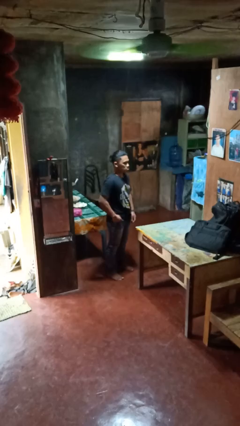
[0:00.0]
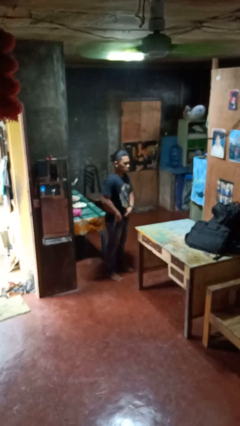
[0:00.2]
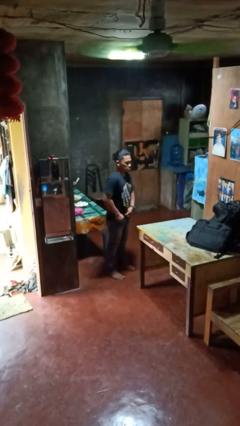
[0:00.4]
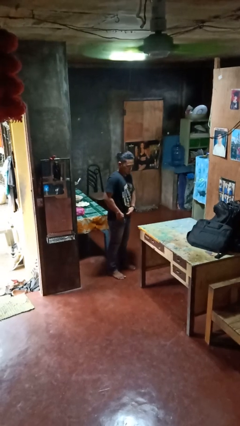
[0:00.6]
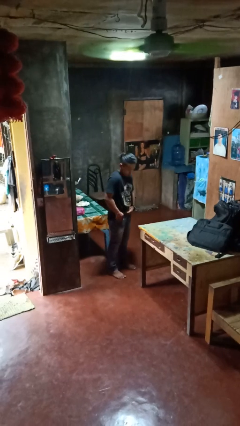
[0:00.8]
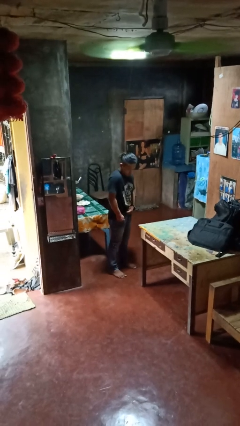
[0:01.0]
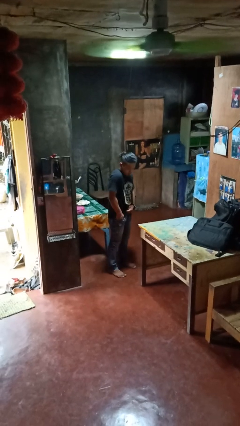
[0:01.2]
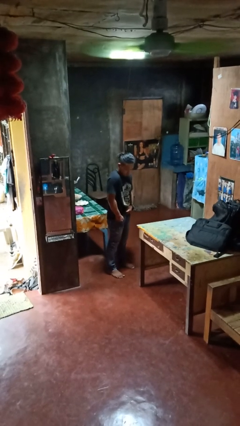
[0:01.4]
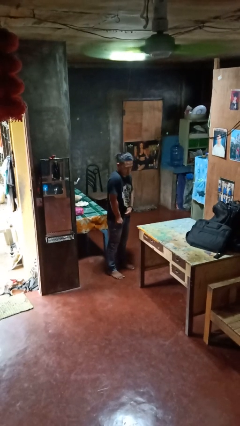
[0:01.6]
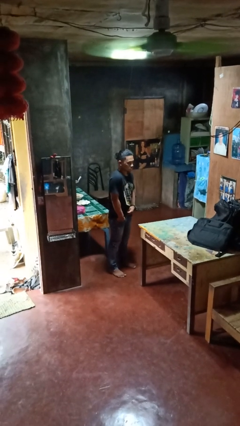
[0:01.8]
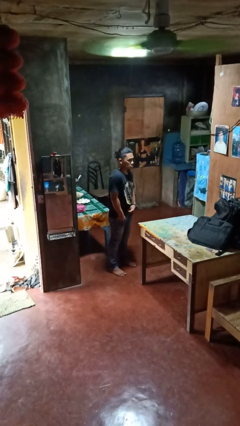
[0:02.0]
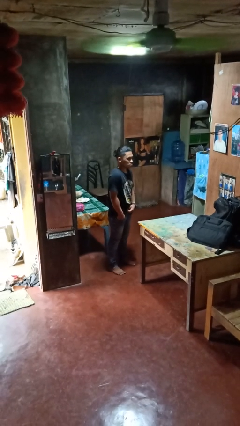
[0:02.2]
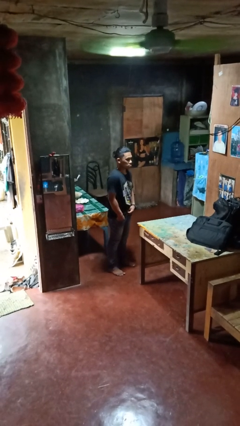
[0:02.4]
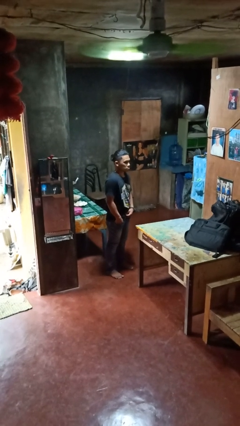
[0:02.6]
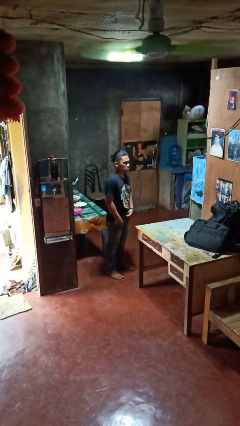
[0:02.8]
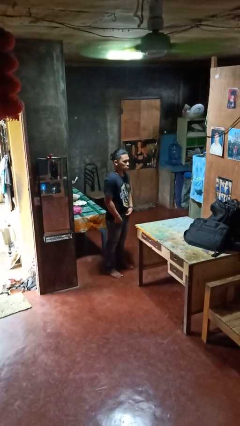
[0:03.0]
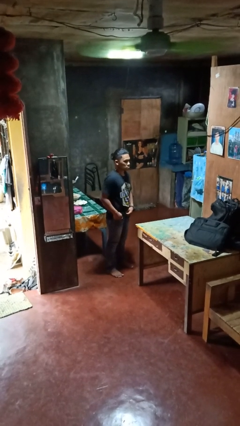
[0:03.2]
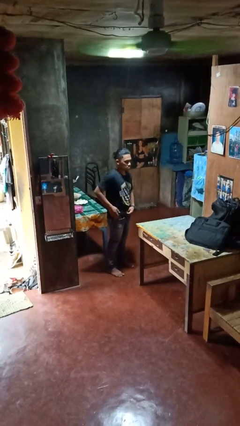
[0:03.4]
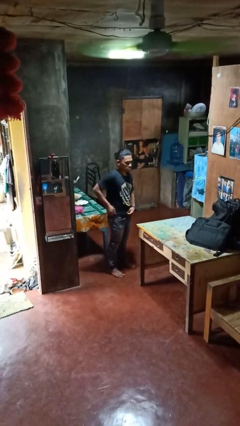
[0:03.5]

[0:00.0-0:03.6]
person puts hands in back pockets

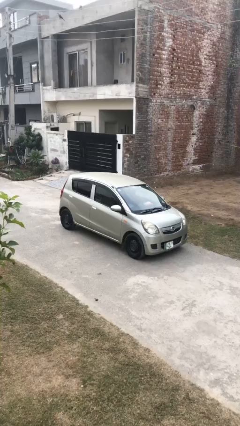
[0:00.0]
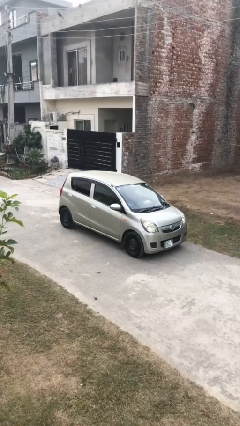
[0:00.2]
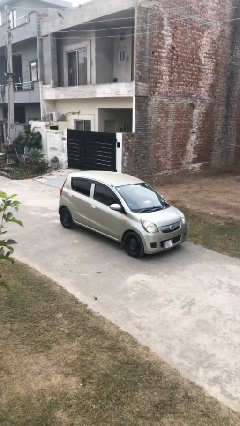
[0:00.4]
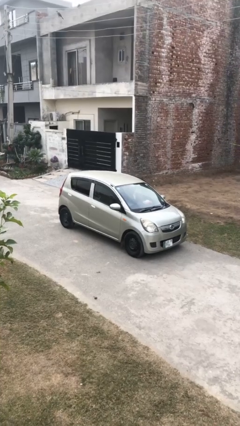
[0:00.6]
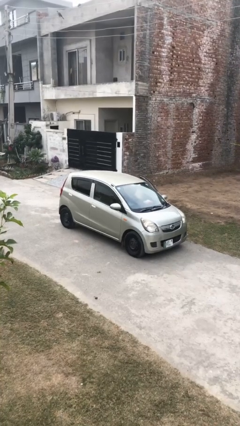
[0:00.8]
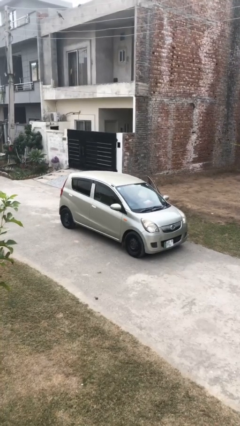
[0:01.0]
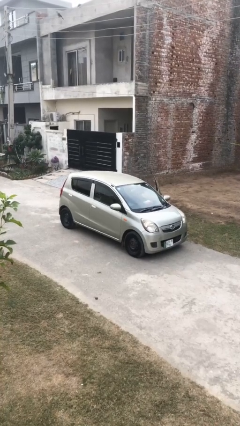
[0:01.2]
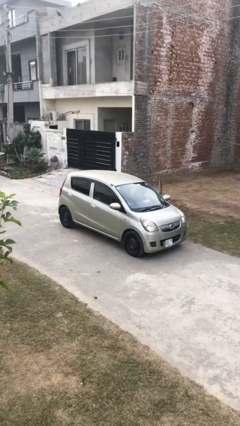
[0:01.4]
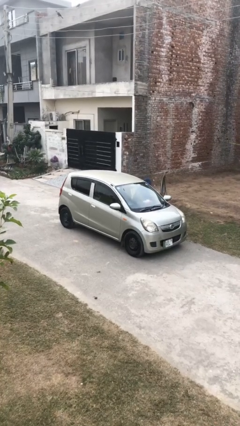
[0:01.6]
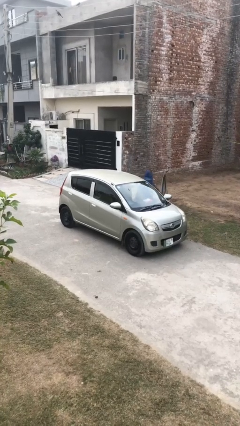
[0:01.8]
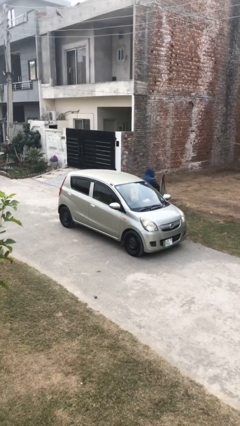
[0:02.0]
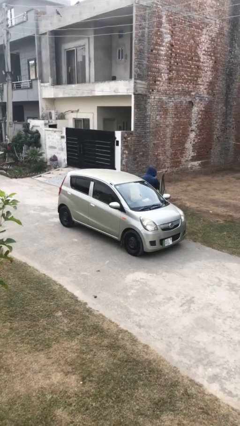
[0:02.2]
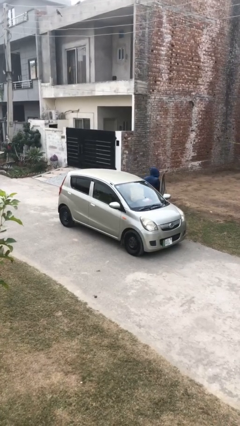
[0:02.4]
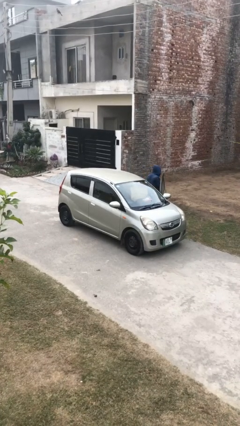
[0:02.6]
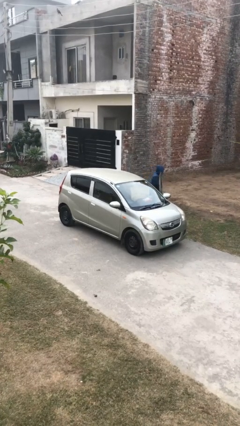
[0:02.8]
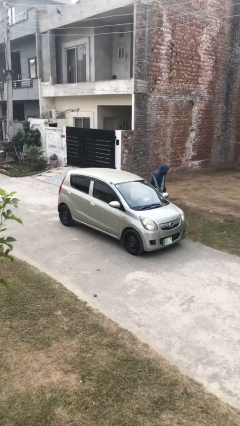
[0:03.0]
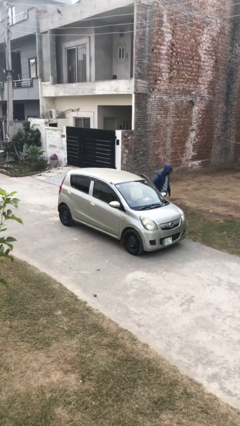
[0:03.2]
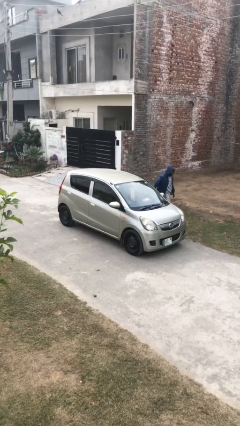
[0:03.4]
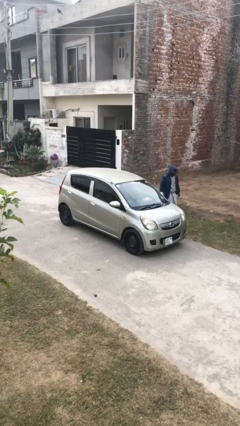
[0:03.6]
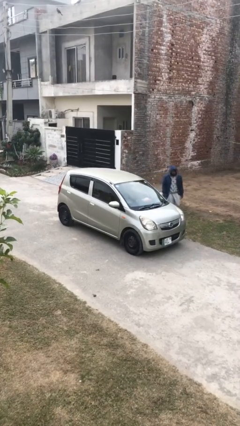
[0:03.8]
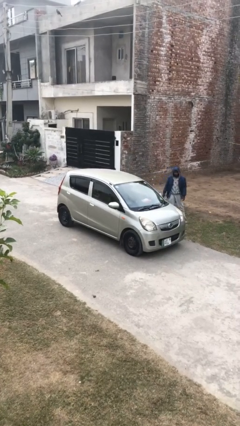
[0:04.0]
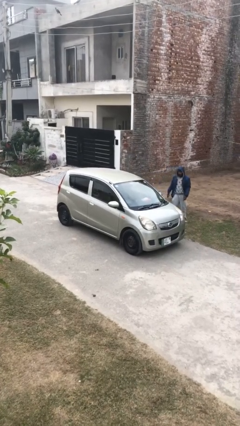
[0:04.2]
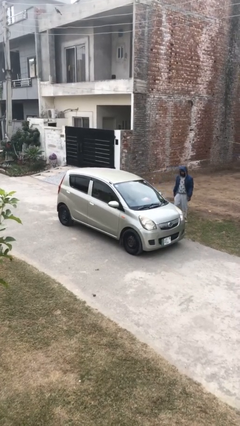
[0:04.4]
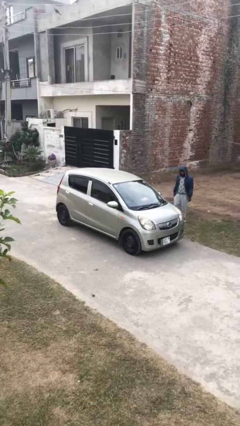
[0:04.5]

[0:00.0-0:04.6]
car drops off person

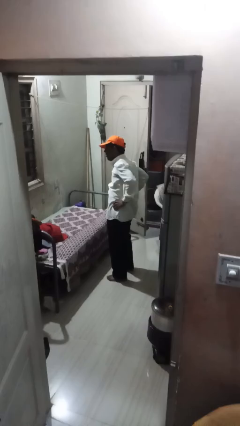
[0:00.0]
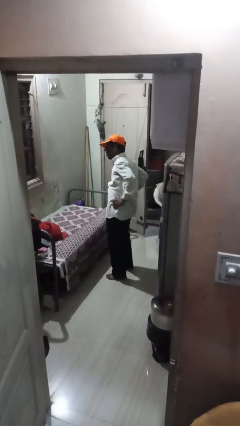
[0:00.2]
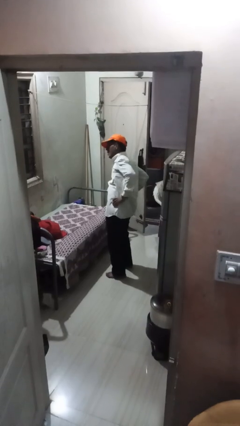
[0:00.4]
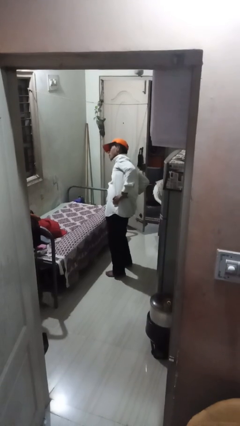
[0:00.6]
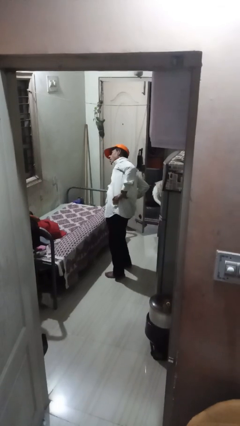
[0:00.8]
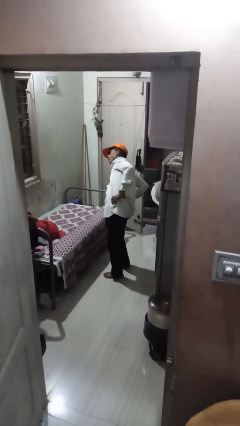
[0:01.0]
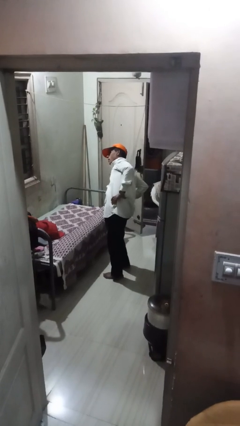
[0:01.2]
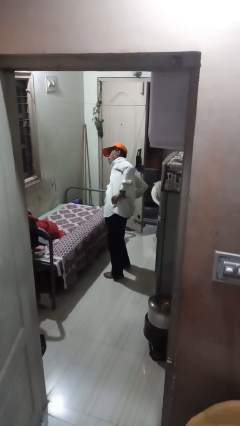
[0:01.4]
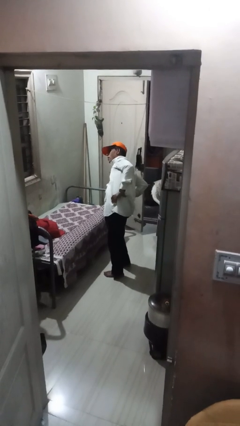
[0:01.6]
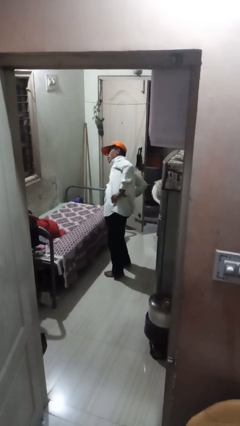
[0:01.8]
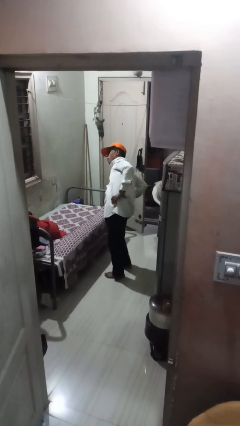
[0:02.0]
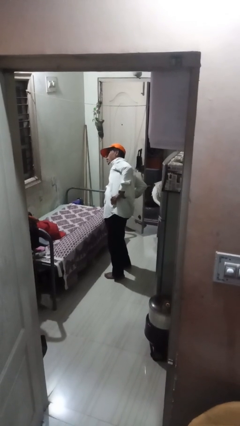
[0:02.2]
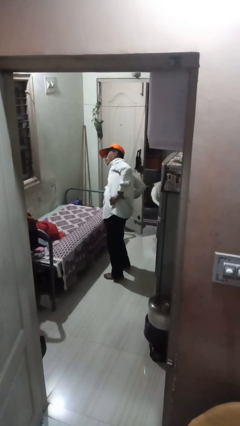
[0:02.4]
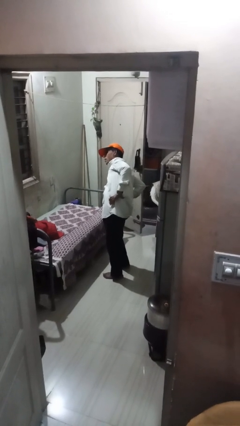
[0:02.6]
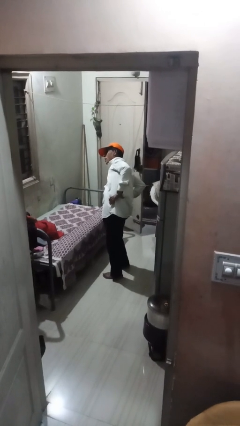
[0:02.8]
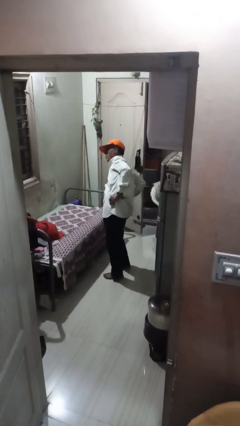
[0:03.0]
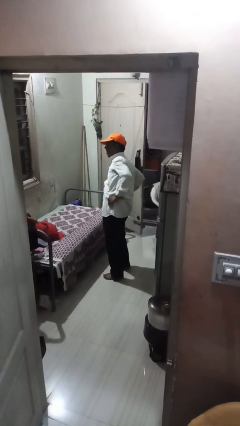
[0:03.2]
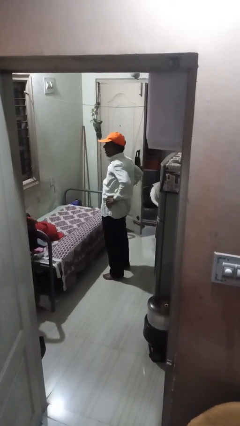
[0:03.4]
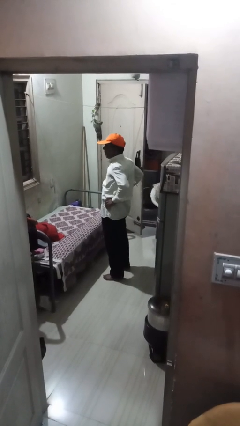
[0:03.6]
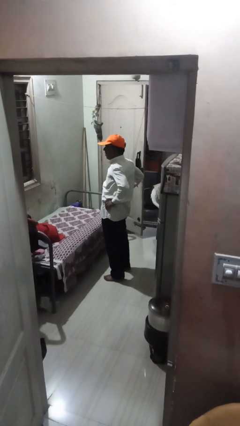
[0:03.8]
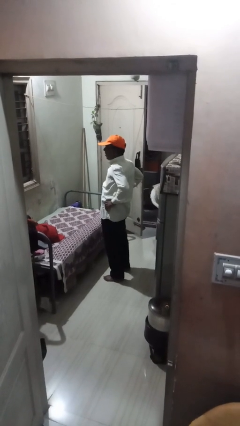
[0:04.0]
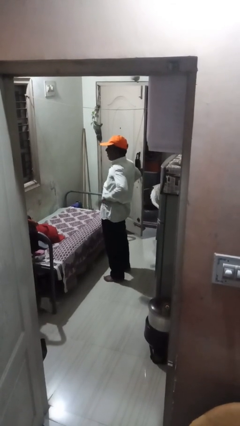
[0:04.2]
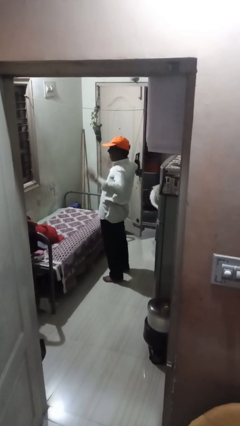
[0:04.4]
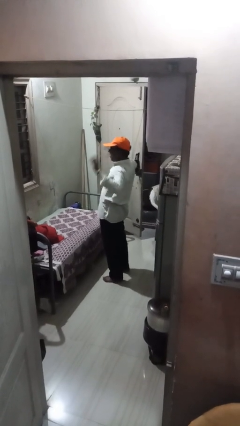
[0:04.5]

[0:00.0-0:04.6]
person stretches arms to side

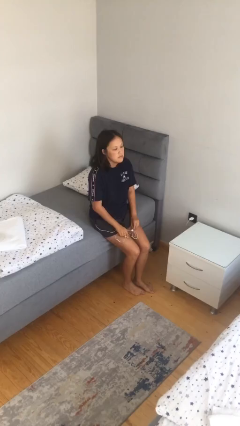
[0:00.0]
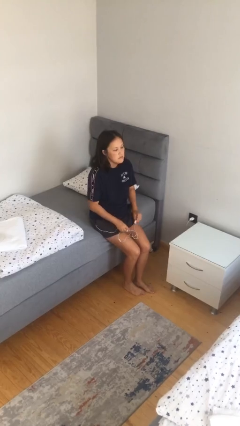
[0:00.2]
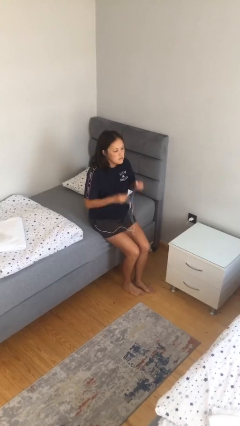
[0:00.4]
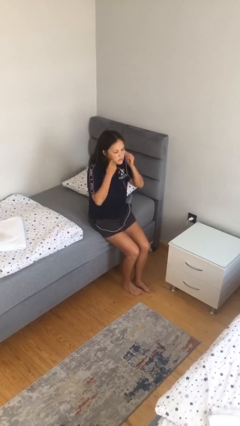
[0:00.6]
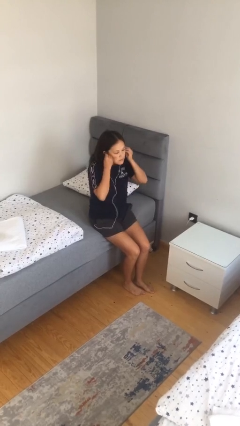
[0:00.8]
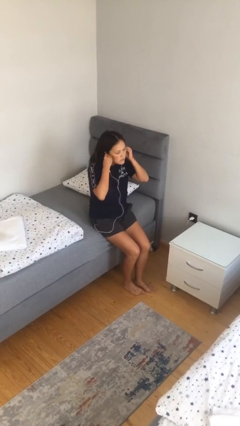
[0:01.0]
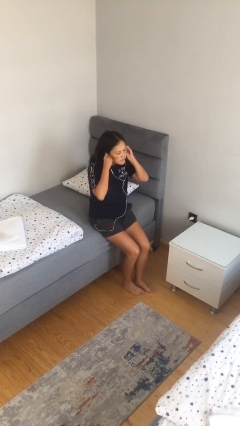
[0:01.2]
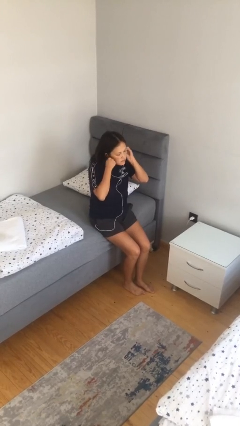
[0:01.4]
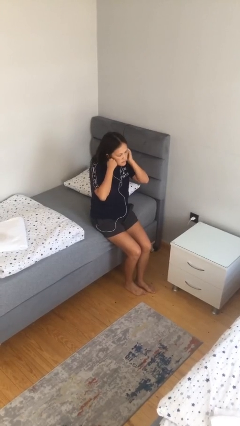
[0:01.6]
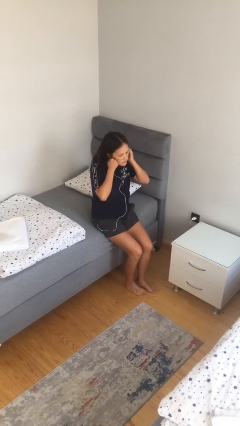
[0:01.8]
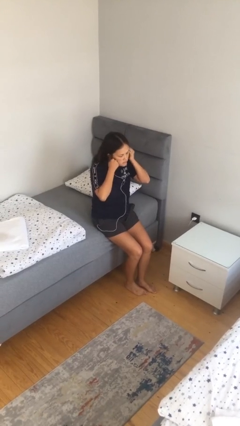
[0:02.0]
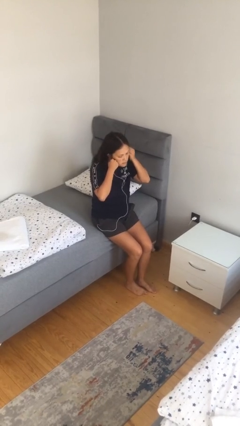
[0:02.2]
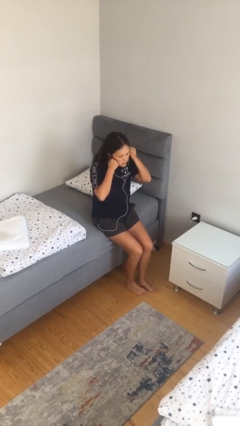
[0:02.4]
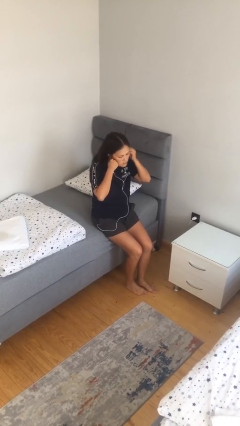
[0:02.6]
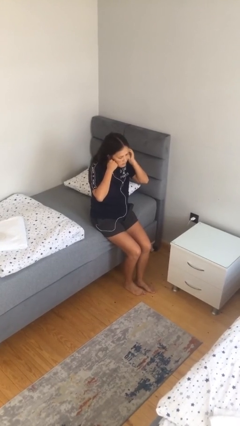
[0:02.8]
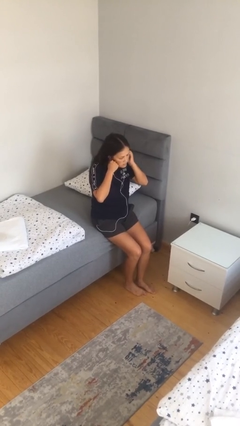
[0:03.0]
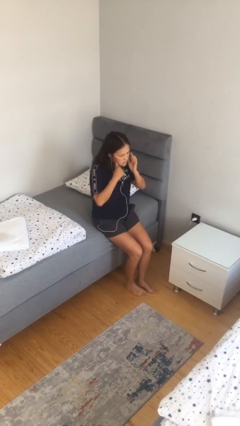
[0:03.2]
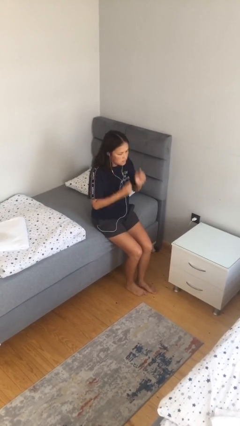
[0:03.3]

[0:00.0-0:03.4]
person puts on headphones

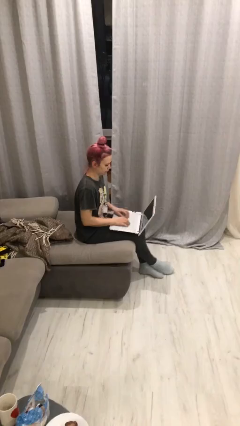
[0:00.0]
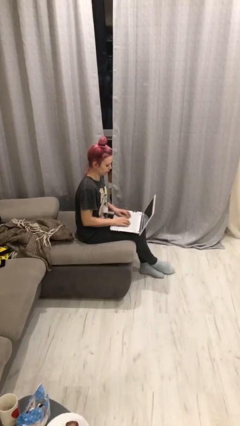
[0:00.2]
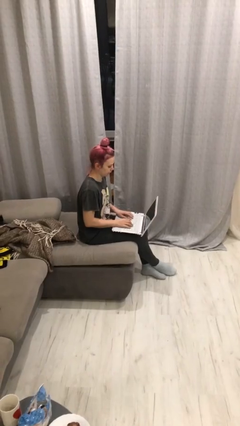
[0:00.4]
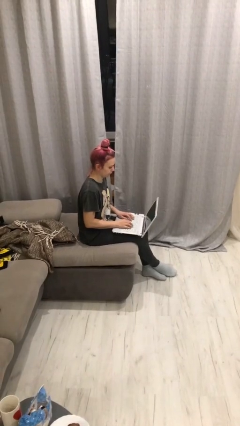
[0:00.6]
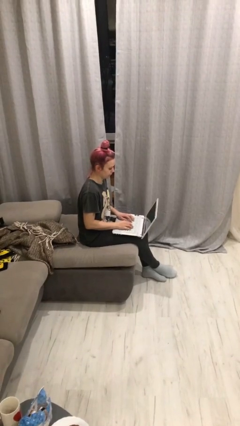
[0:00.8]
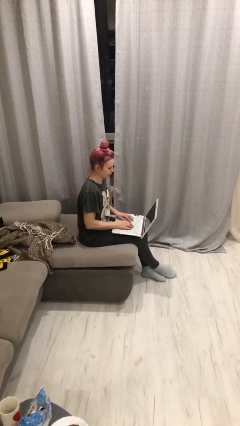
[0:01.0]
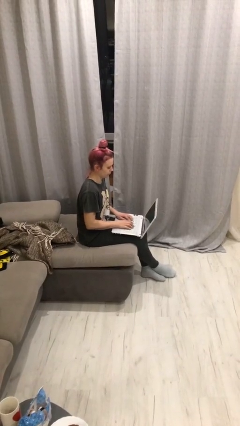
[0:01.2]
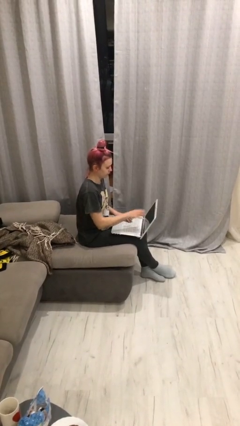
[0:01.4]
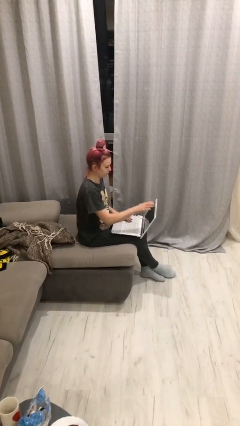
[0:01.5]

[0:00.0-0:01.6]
person interacts with laptop
